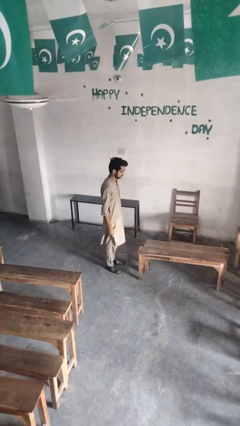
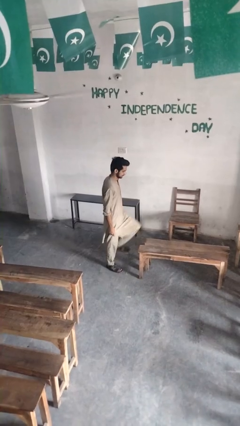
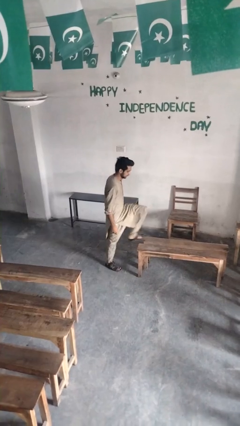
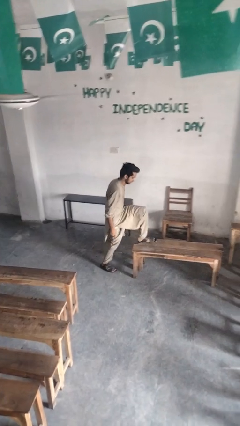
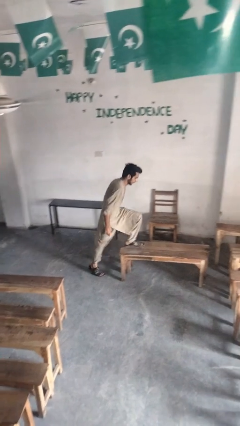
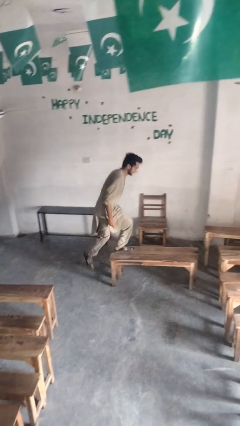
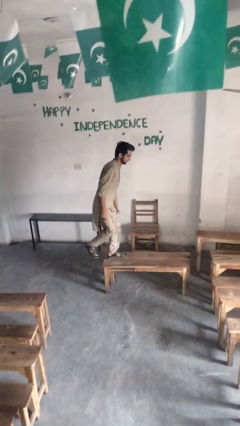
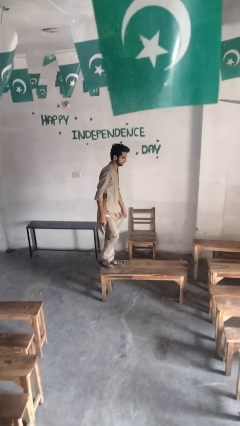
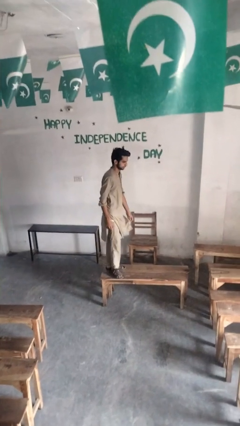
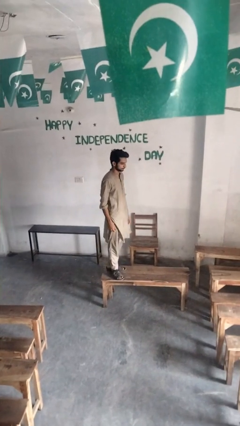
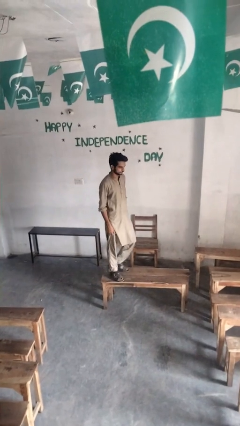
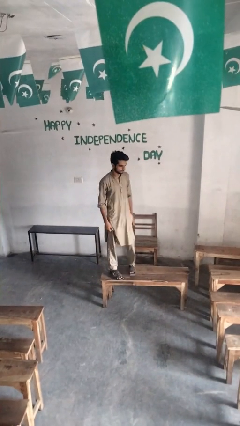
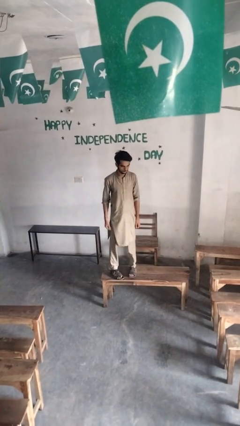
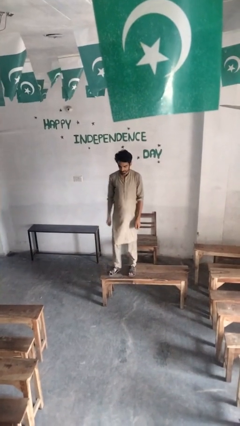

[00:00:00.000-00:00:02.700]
person climbs on table

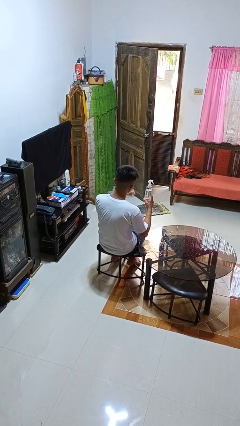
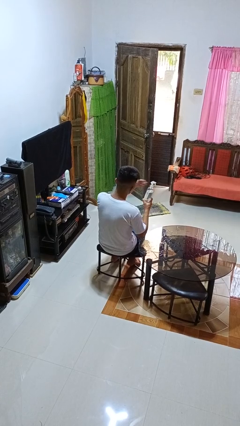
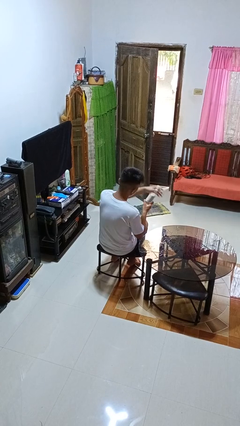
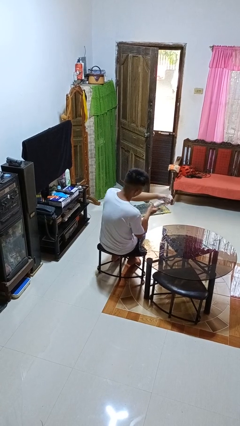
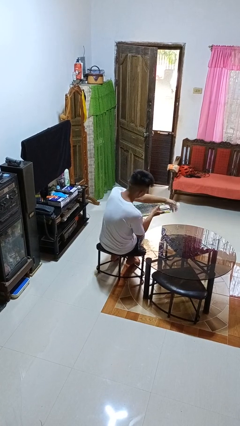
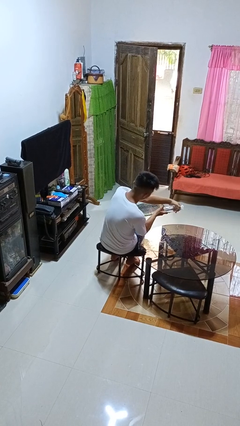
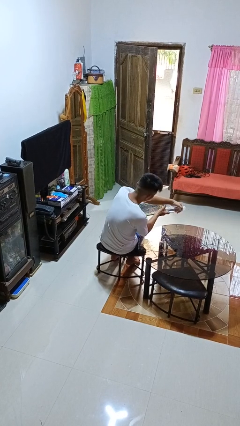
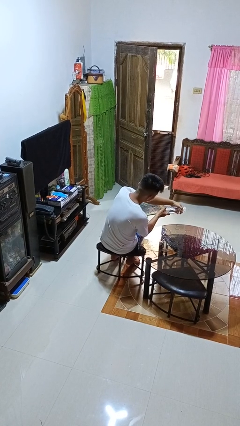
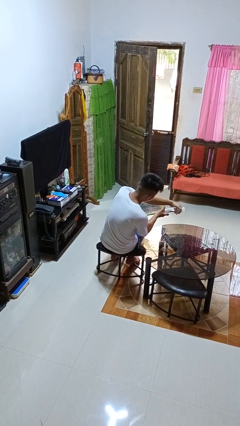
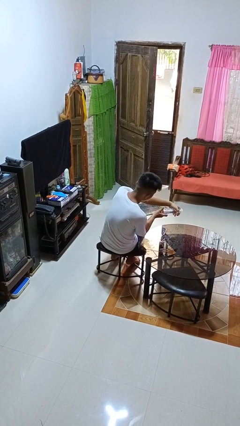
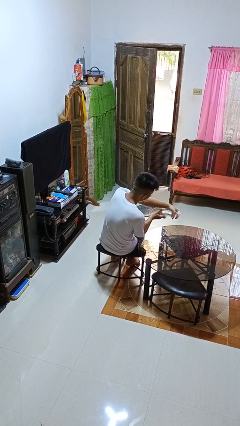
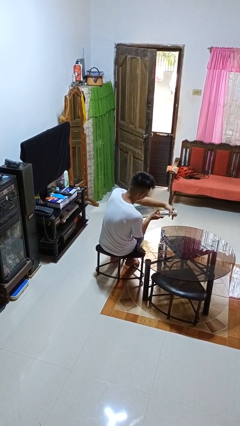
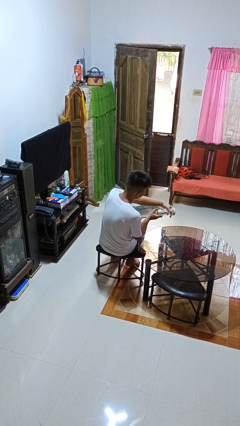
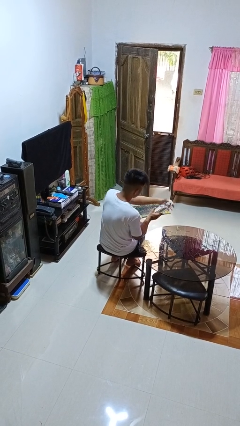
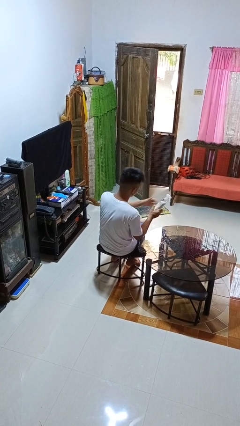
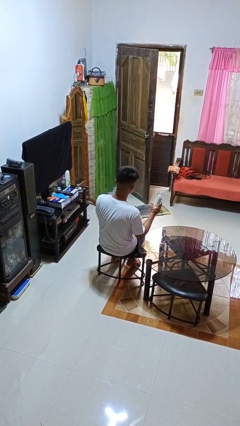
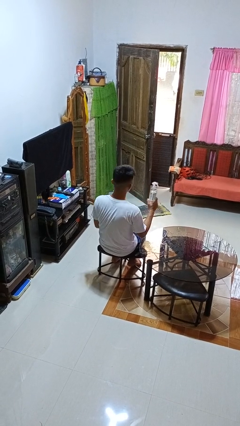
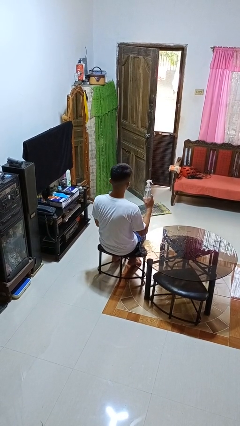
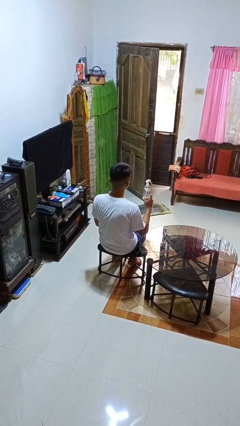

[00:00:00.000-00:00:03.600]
person sprays from bottle

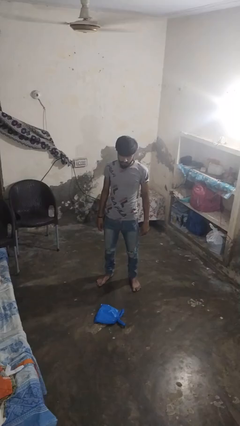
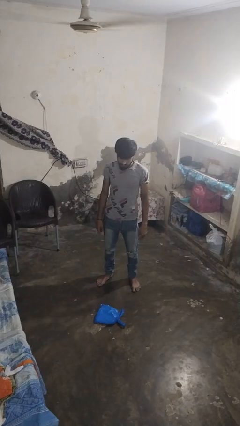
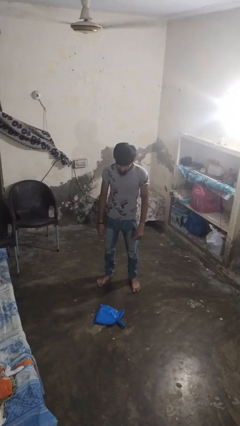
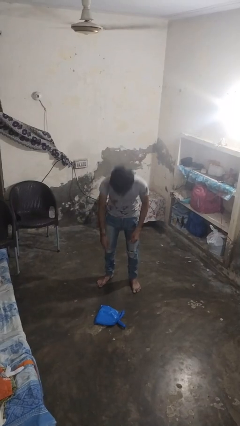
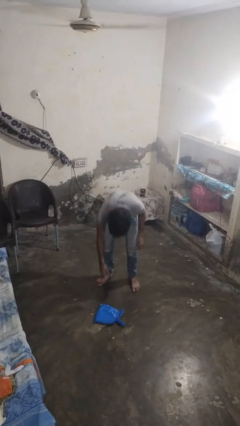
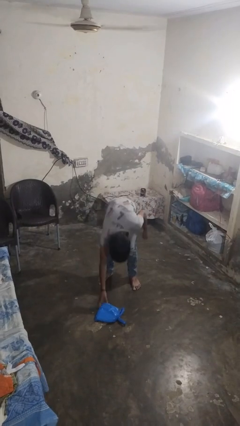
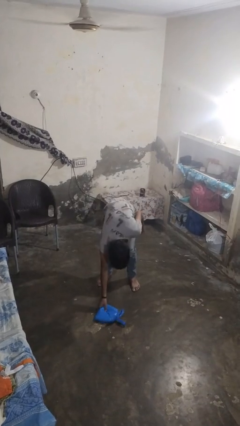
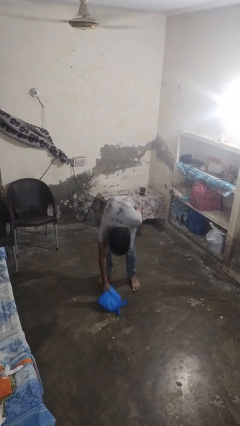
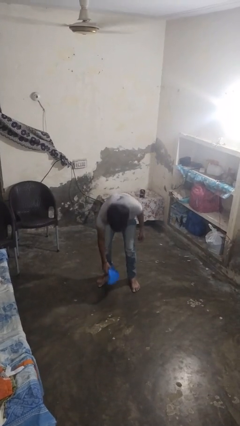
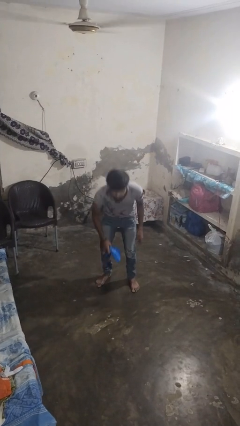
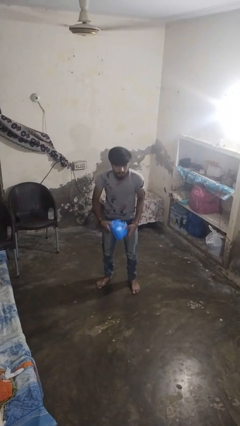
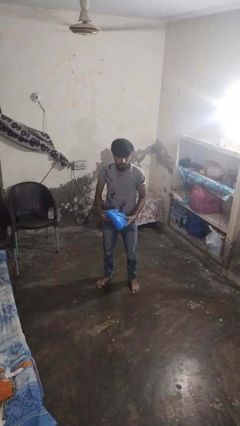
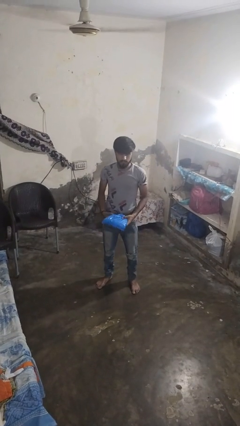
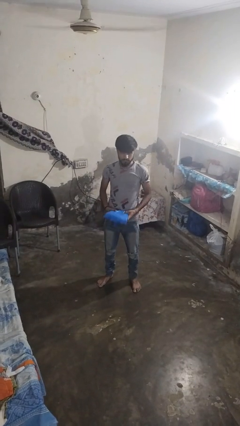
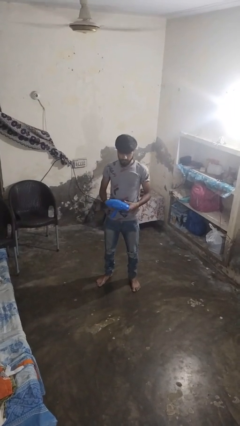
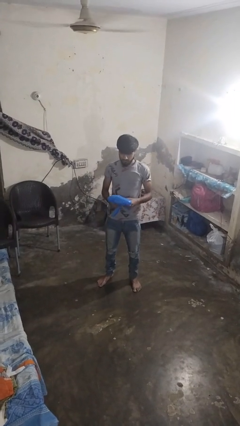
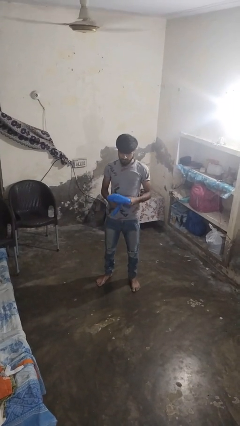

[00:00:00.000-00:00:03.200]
person picks up object from floor

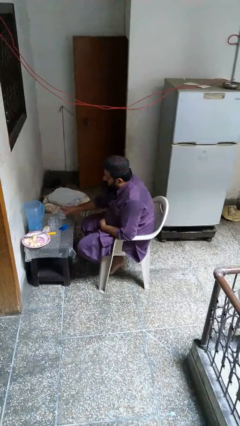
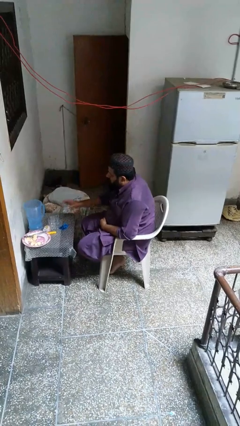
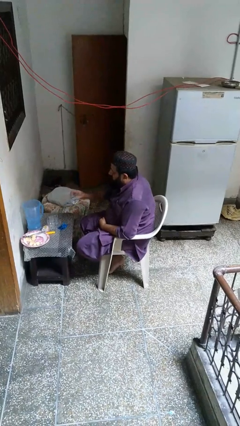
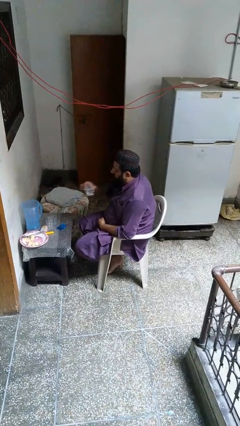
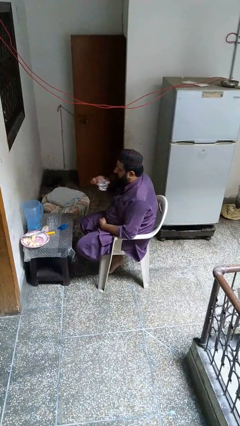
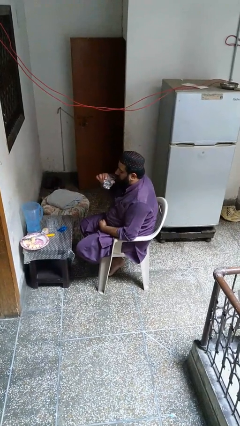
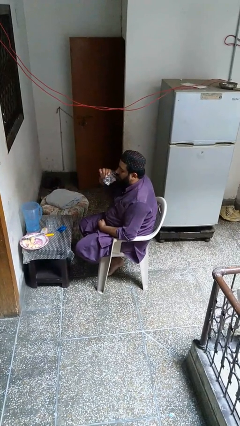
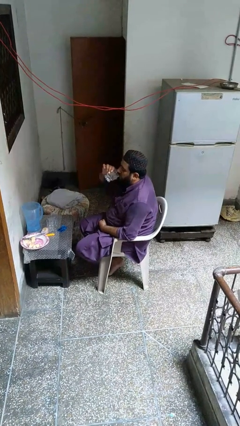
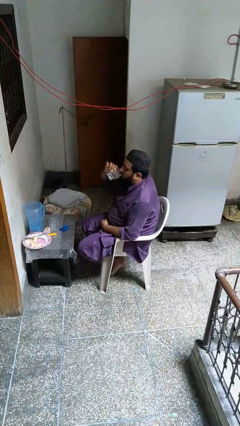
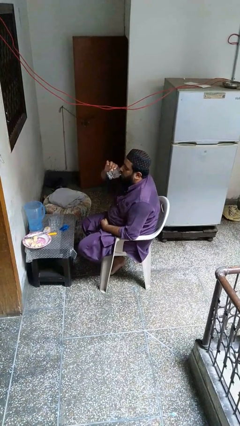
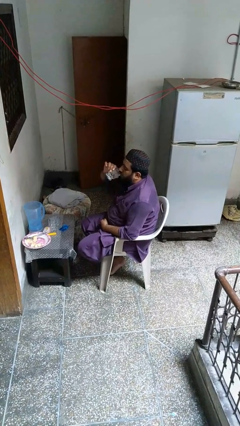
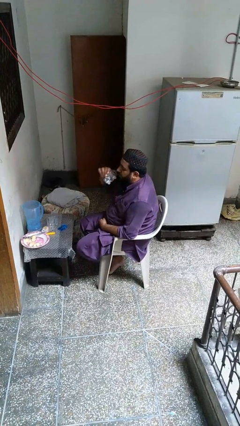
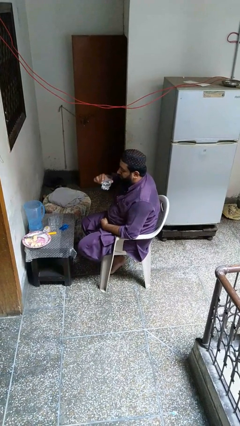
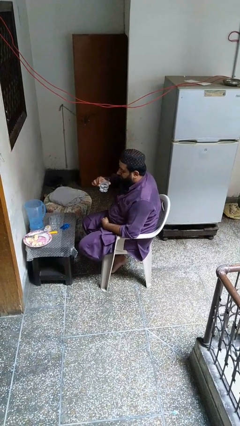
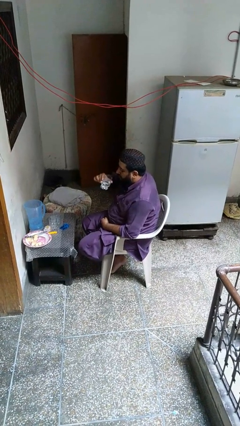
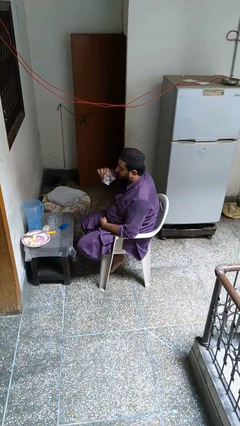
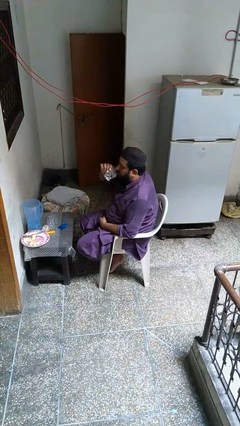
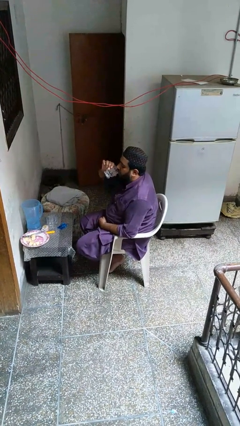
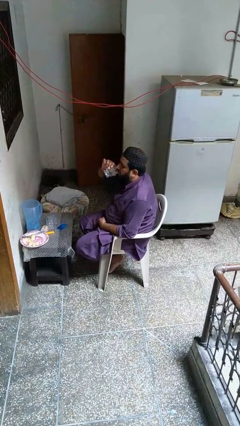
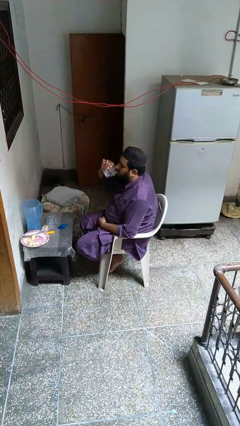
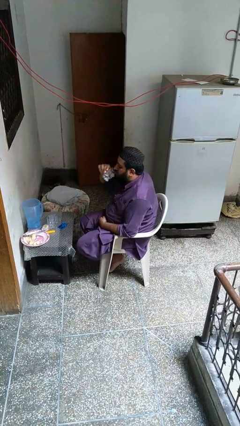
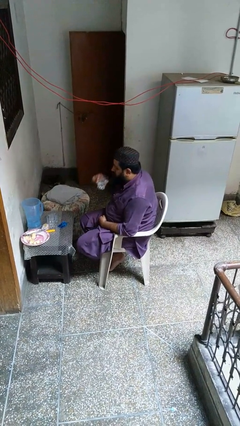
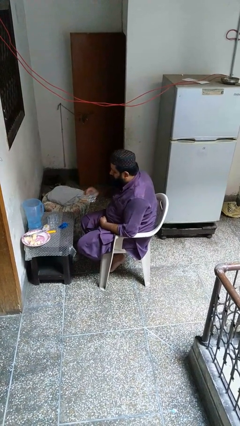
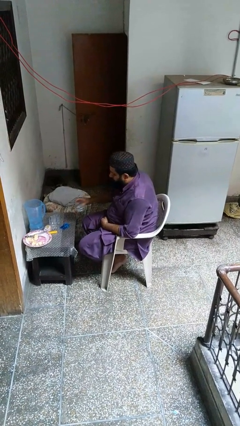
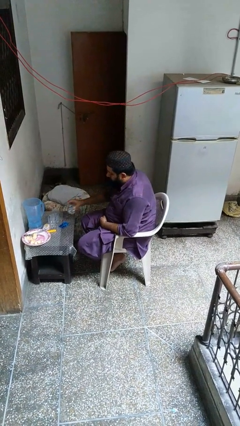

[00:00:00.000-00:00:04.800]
person drinks from cup

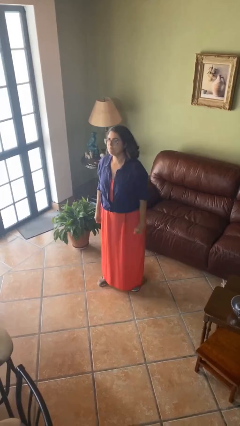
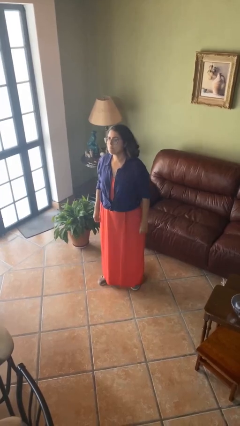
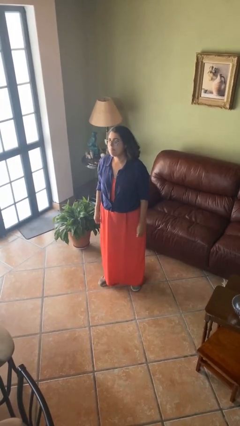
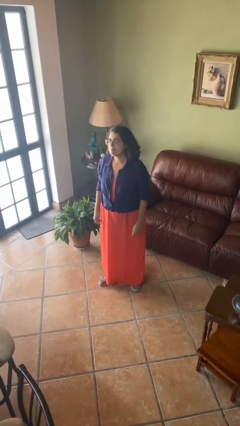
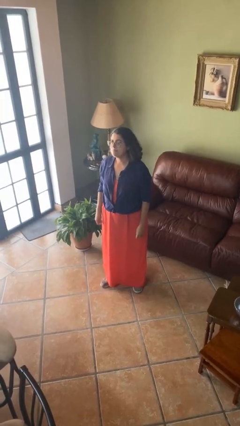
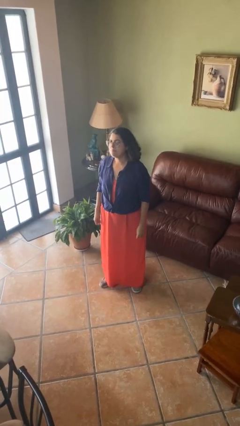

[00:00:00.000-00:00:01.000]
person gestures lower hand

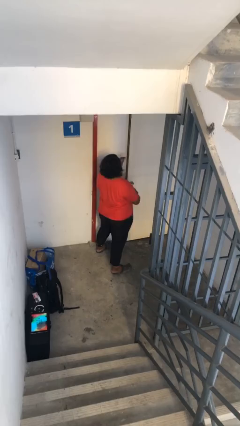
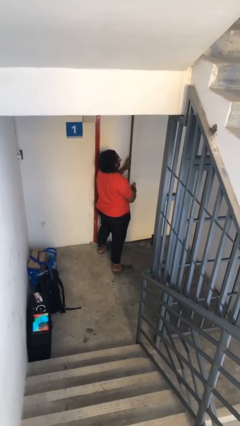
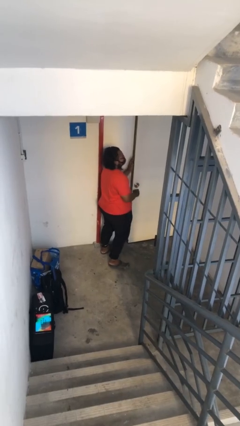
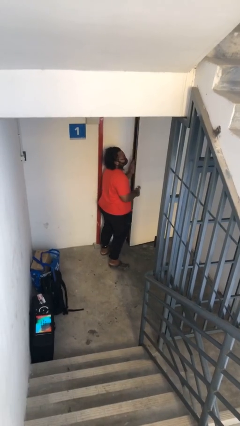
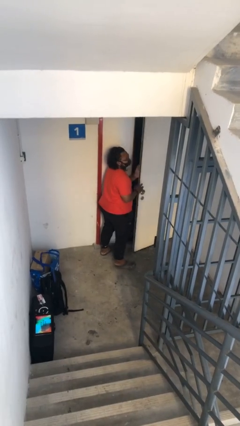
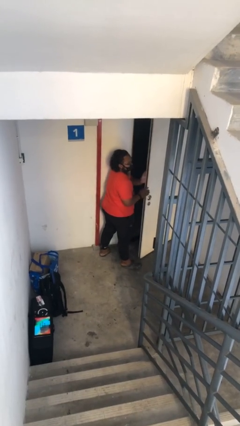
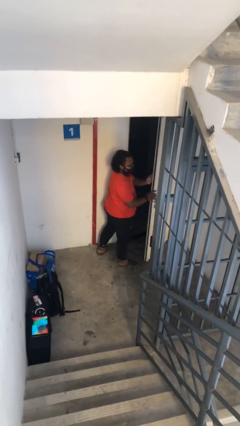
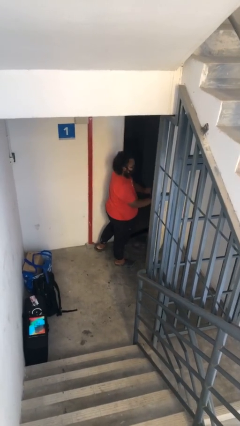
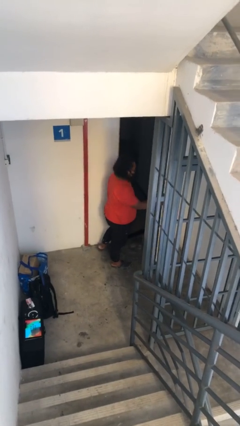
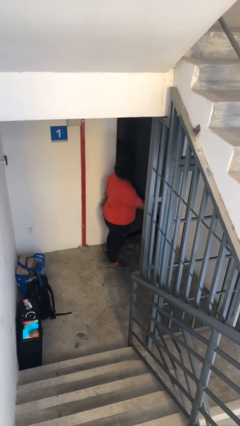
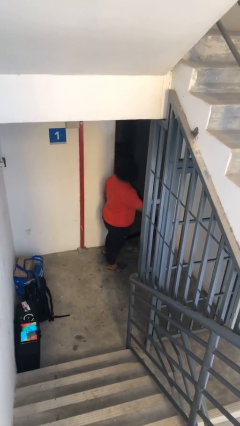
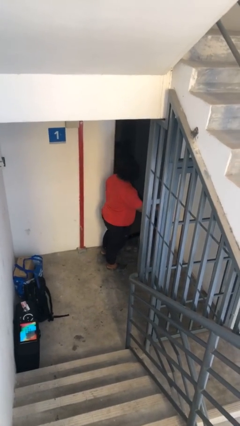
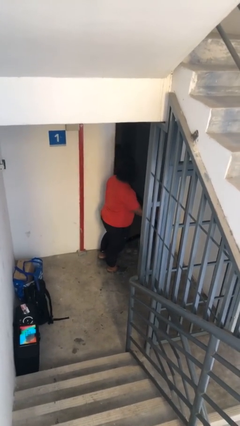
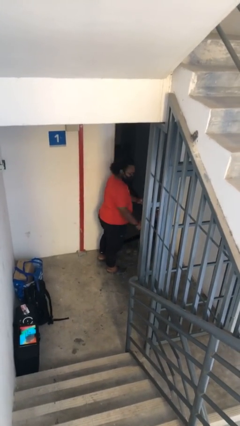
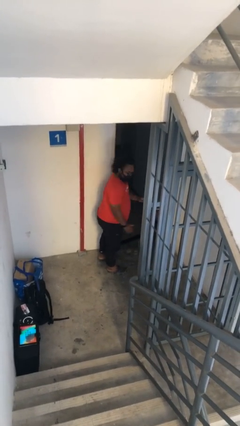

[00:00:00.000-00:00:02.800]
person opens facility door
